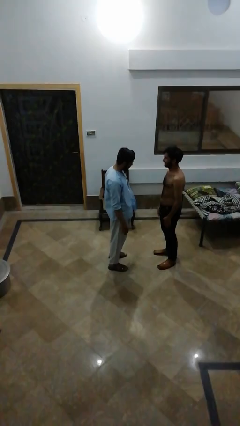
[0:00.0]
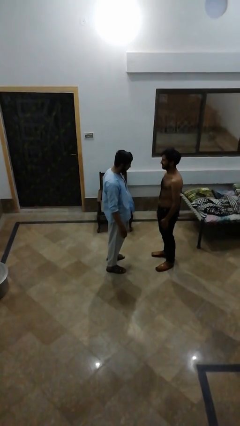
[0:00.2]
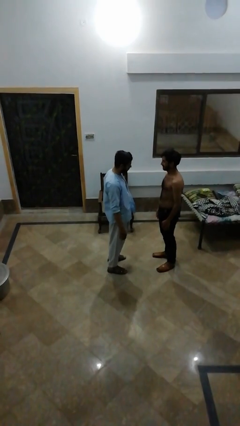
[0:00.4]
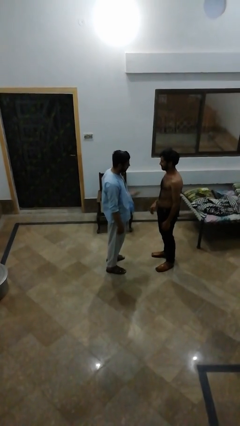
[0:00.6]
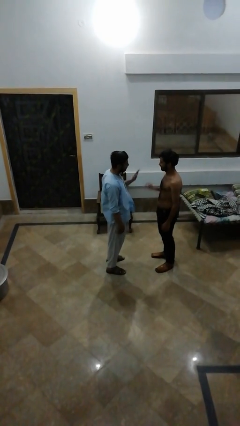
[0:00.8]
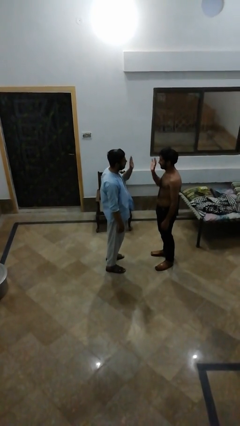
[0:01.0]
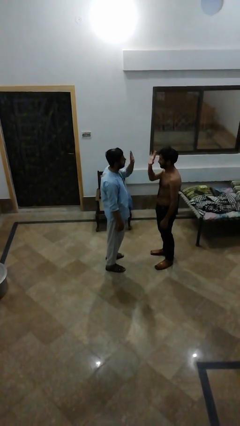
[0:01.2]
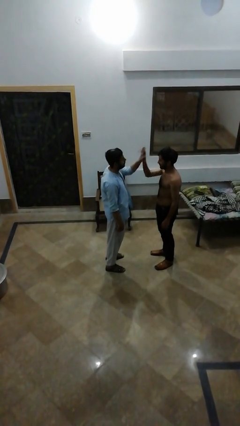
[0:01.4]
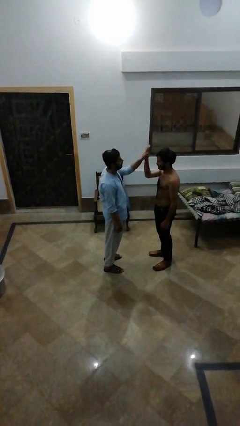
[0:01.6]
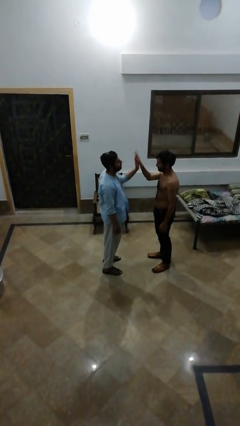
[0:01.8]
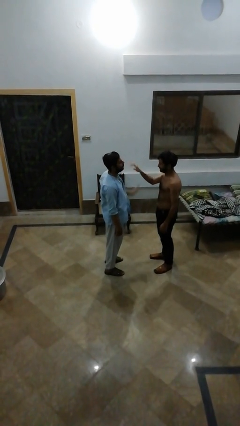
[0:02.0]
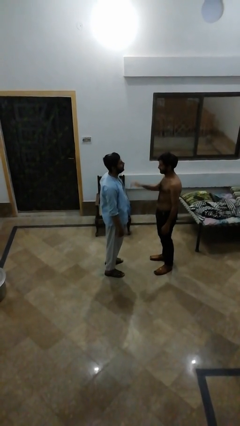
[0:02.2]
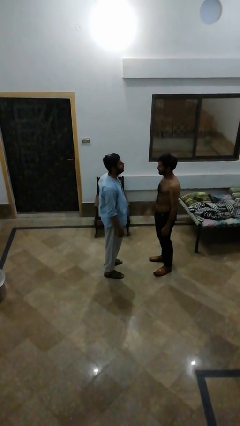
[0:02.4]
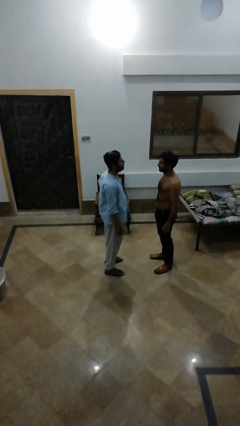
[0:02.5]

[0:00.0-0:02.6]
person highfives hand

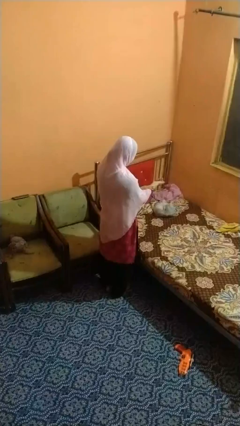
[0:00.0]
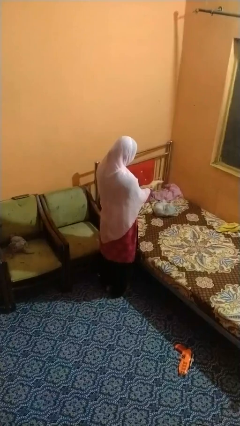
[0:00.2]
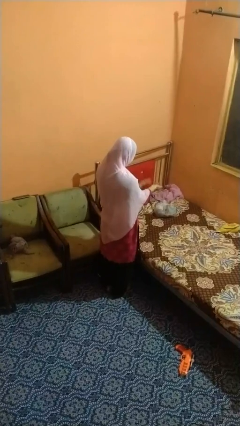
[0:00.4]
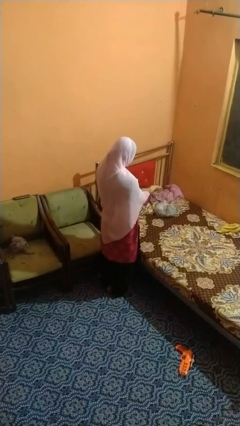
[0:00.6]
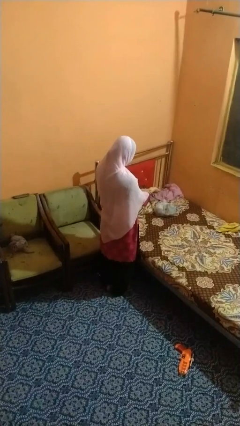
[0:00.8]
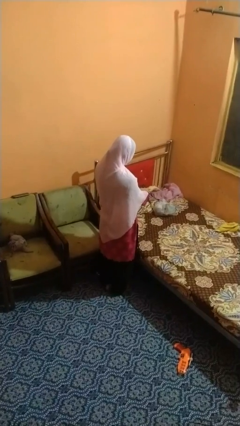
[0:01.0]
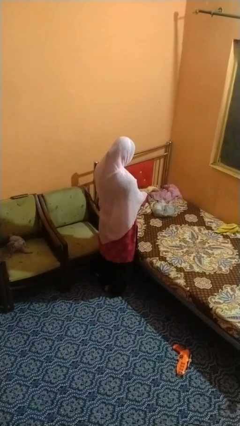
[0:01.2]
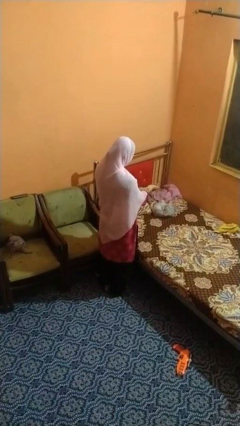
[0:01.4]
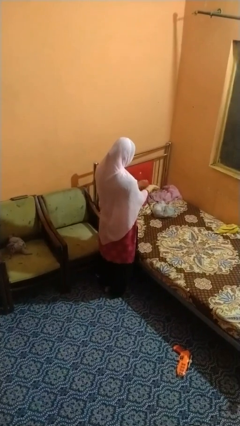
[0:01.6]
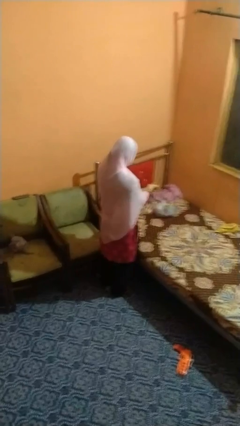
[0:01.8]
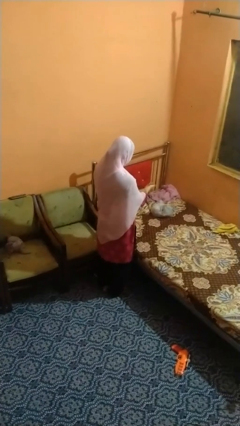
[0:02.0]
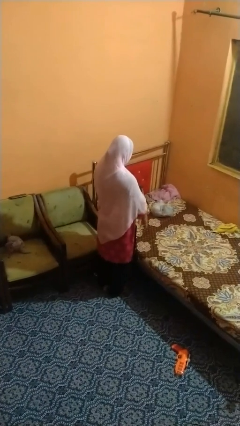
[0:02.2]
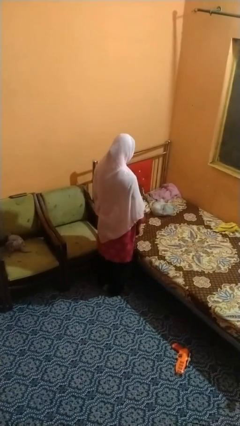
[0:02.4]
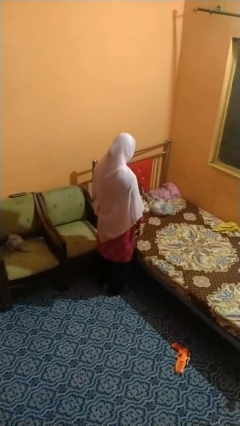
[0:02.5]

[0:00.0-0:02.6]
person swats bug

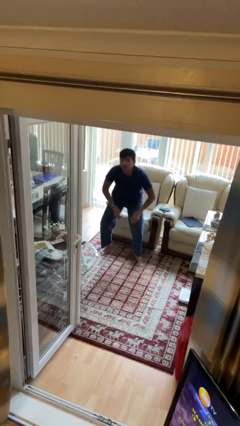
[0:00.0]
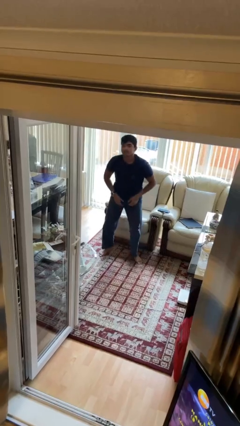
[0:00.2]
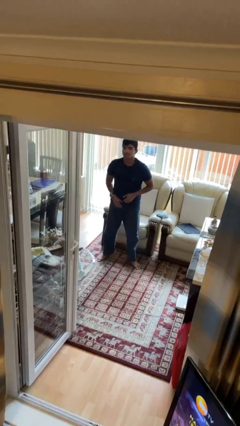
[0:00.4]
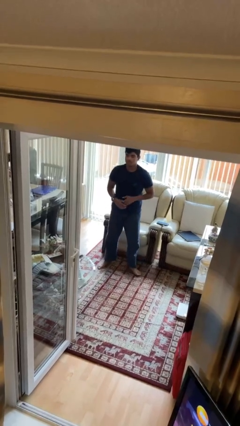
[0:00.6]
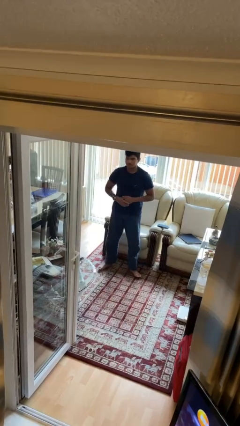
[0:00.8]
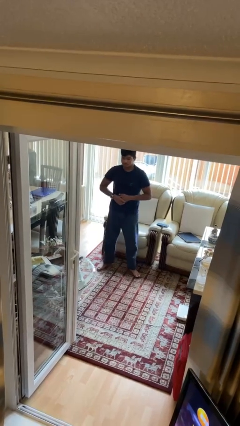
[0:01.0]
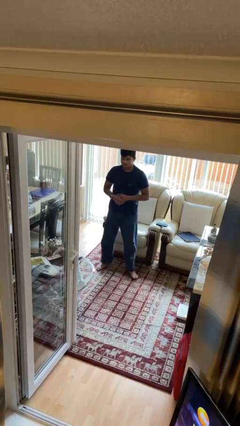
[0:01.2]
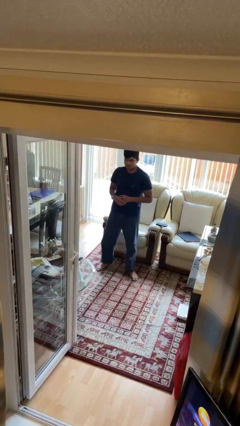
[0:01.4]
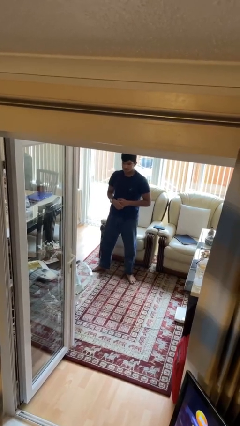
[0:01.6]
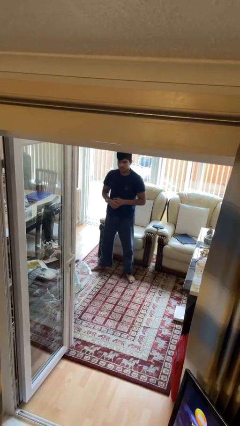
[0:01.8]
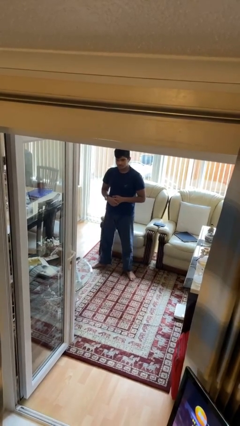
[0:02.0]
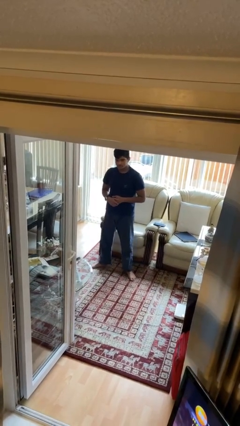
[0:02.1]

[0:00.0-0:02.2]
person stands up

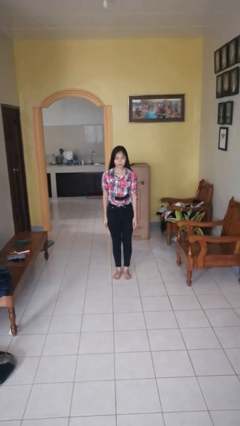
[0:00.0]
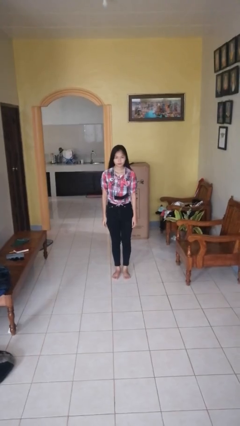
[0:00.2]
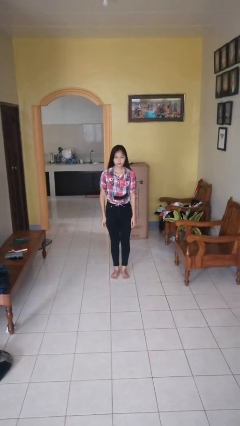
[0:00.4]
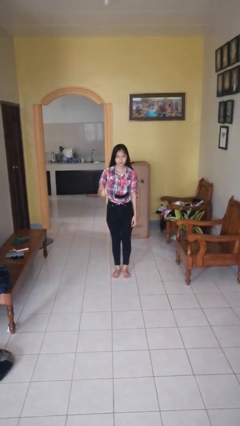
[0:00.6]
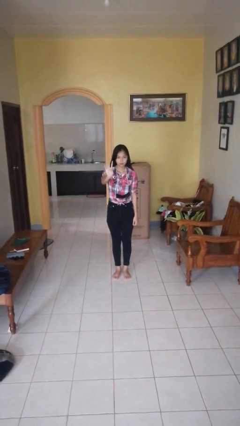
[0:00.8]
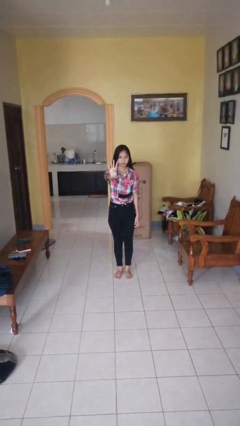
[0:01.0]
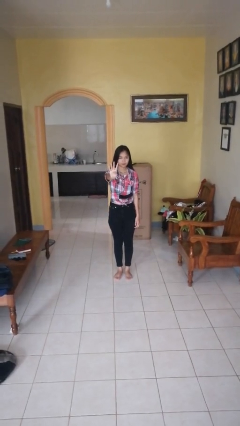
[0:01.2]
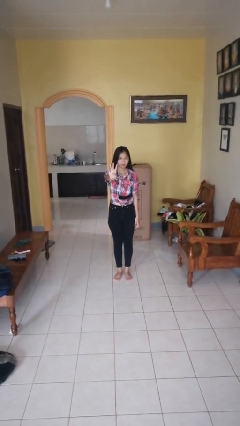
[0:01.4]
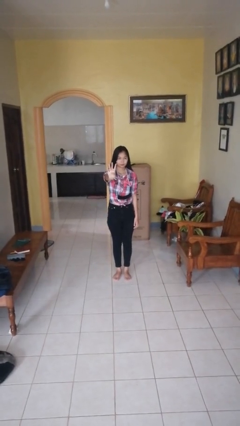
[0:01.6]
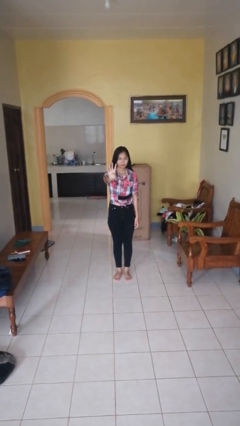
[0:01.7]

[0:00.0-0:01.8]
person gestures number four

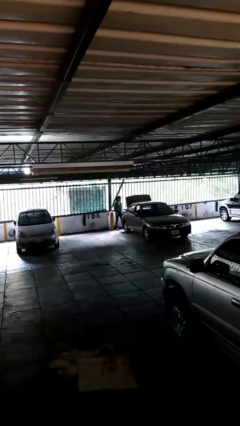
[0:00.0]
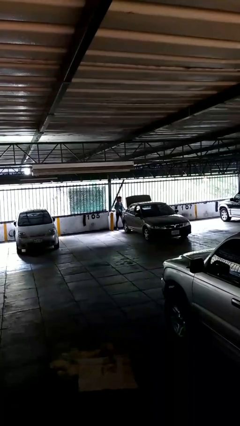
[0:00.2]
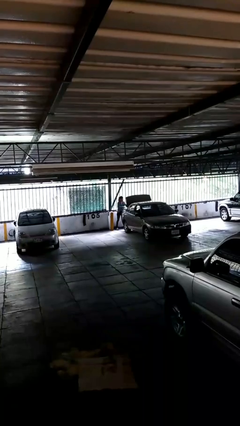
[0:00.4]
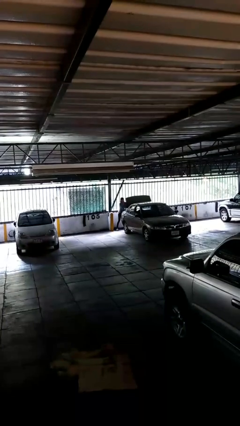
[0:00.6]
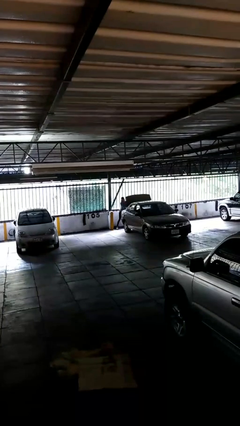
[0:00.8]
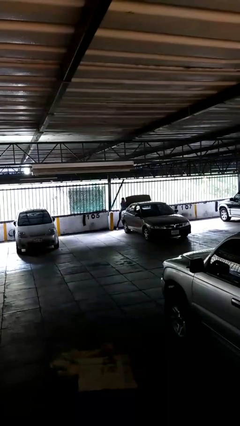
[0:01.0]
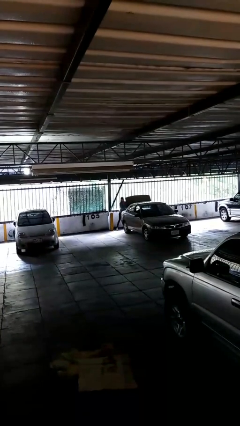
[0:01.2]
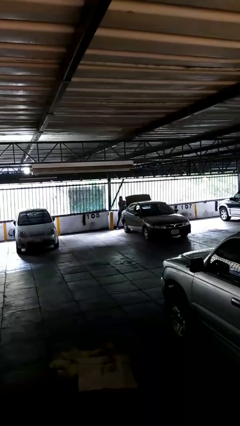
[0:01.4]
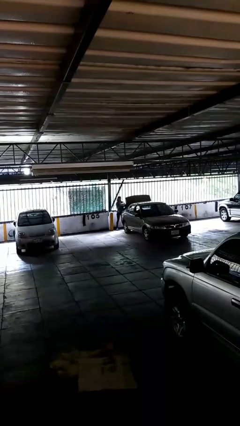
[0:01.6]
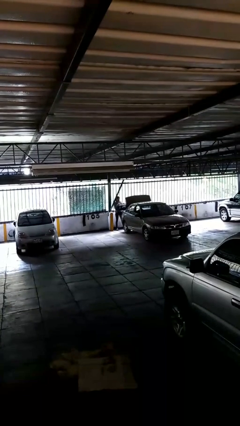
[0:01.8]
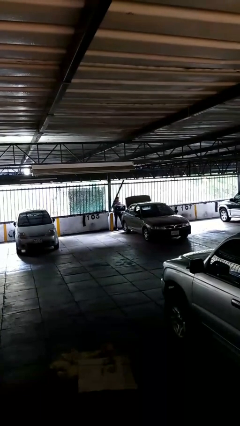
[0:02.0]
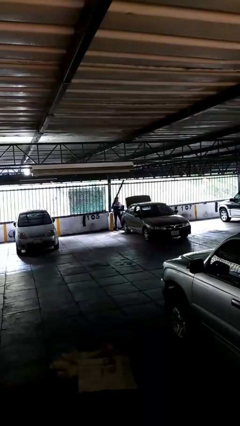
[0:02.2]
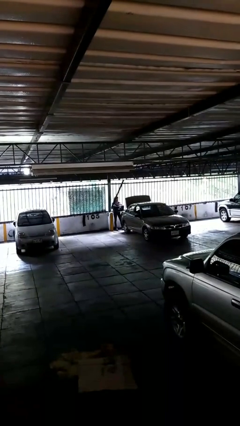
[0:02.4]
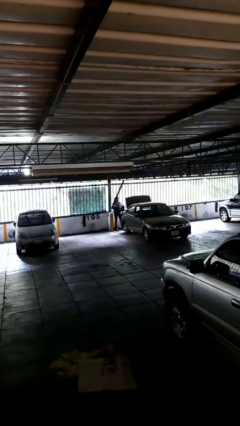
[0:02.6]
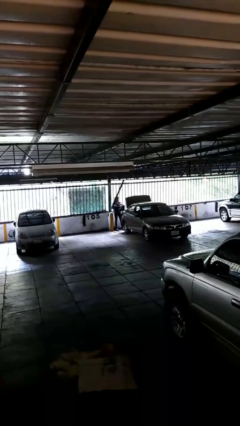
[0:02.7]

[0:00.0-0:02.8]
person unloads car

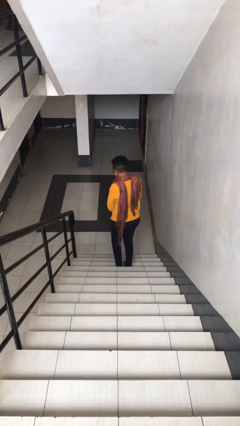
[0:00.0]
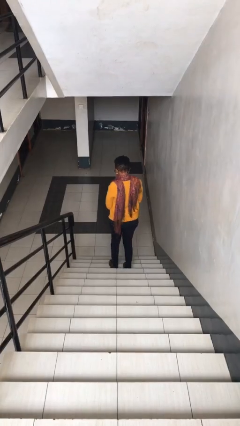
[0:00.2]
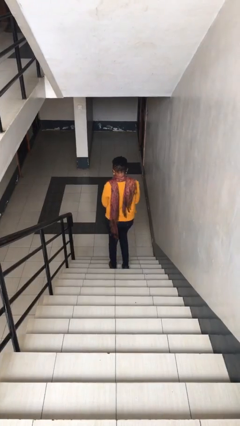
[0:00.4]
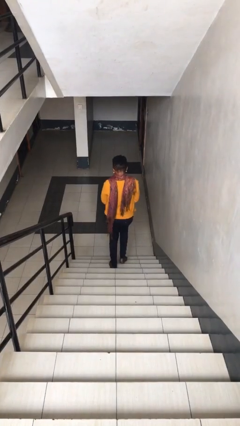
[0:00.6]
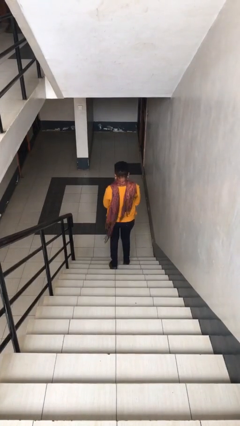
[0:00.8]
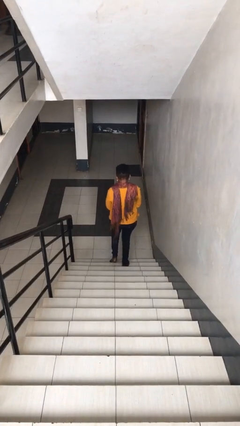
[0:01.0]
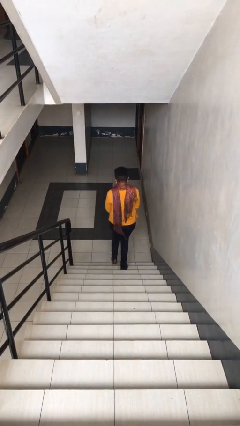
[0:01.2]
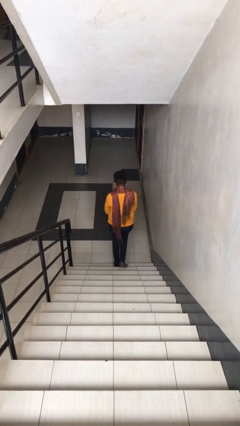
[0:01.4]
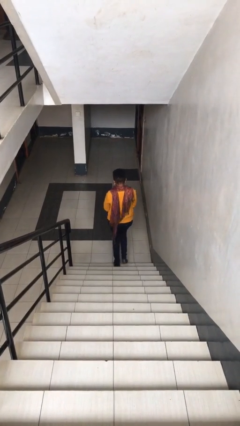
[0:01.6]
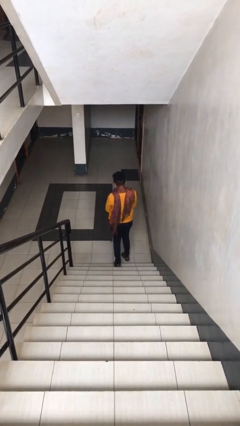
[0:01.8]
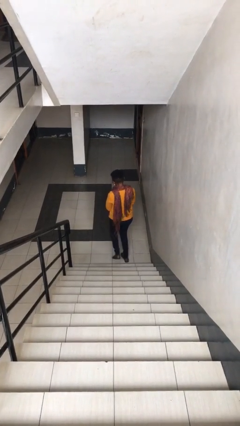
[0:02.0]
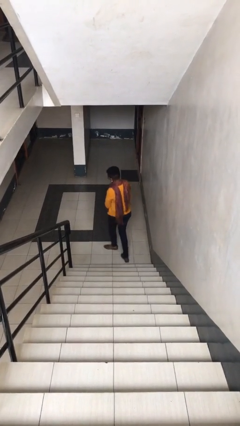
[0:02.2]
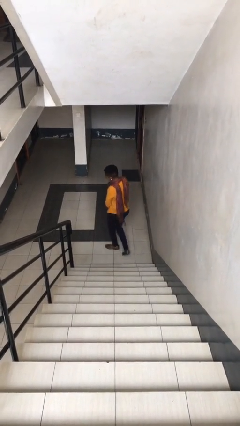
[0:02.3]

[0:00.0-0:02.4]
person climbs down stairs

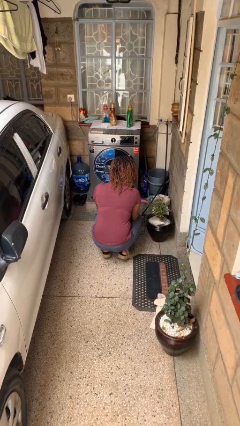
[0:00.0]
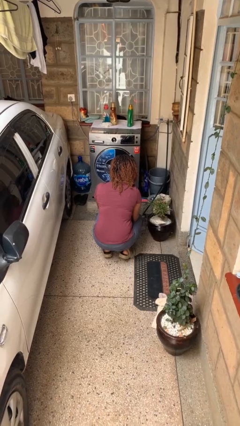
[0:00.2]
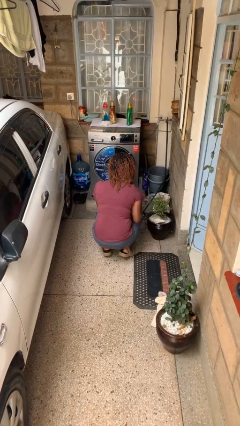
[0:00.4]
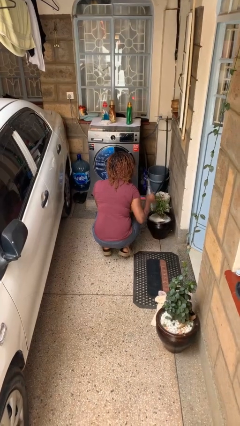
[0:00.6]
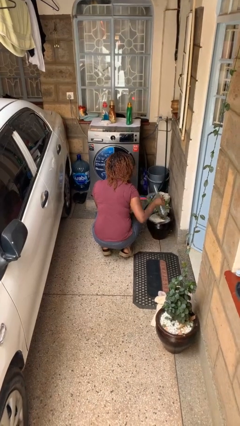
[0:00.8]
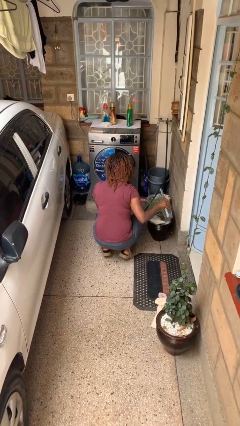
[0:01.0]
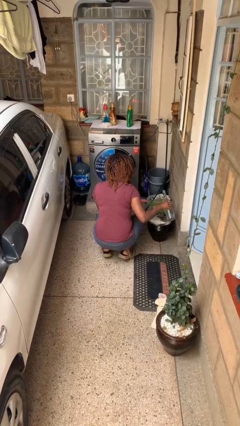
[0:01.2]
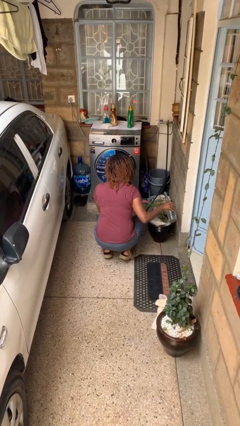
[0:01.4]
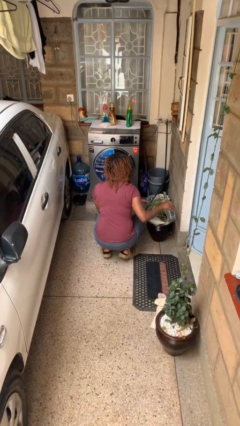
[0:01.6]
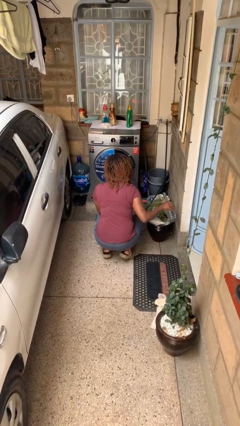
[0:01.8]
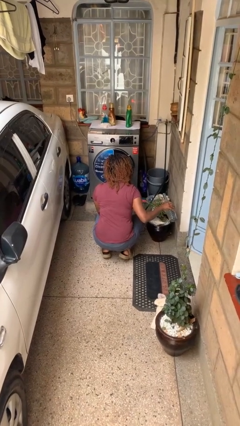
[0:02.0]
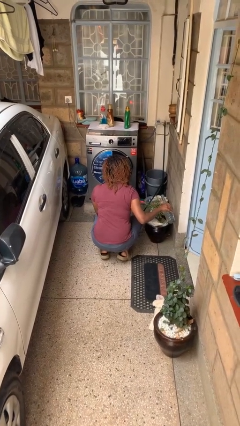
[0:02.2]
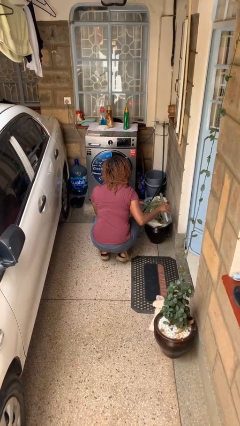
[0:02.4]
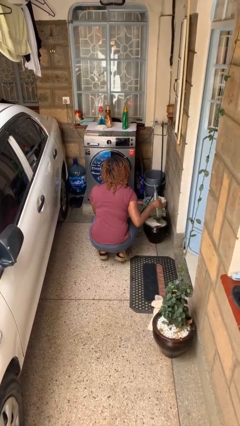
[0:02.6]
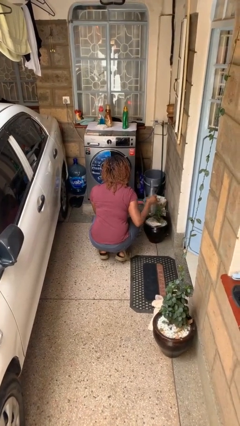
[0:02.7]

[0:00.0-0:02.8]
person waters houseplant
